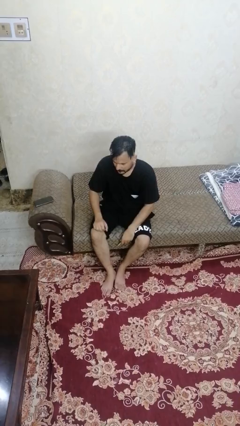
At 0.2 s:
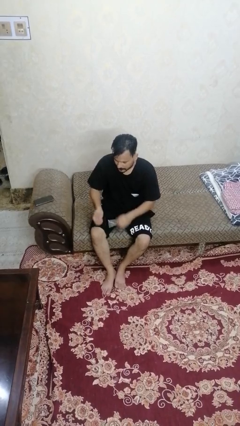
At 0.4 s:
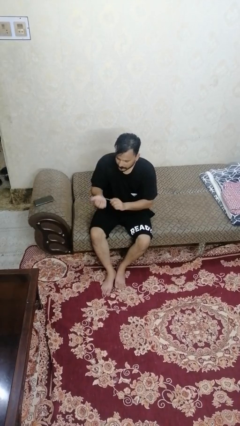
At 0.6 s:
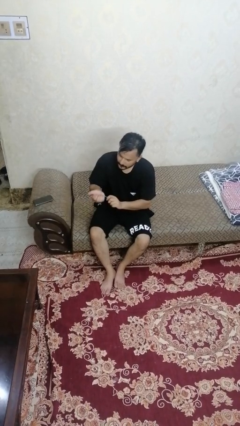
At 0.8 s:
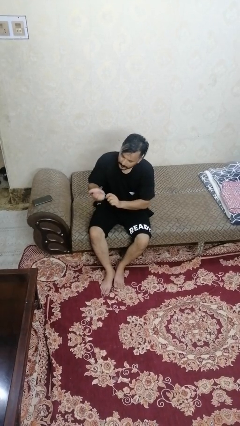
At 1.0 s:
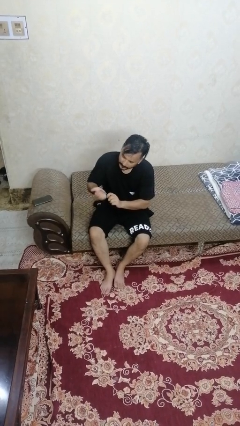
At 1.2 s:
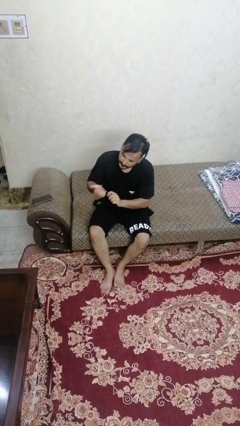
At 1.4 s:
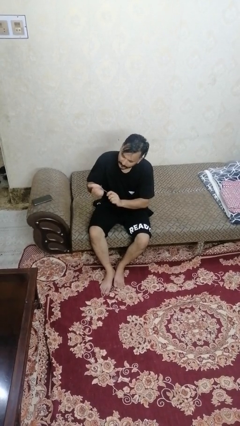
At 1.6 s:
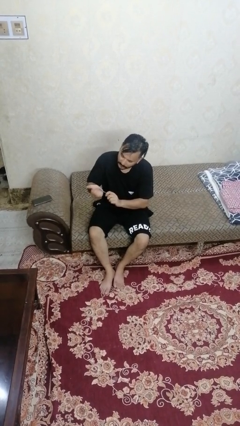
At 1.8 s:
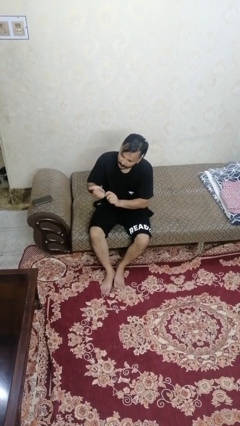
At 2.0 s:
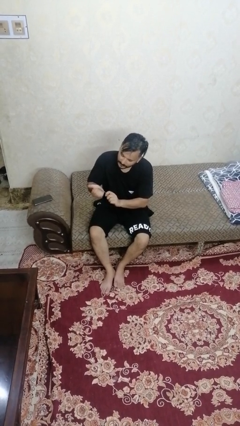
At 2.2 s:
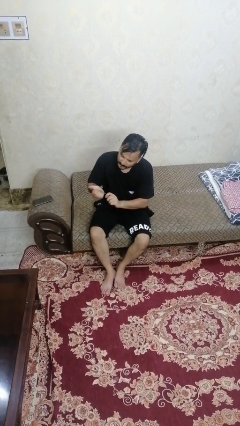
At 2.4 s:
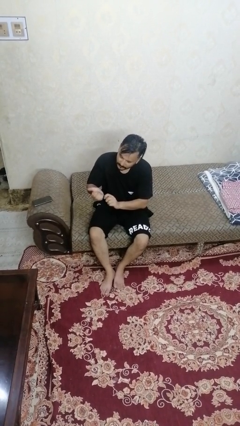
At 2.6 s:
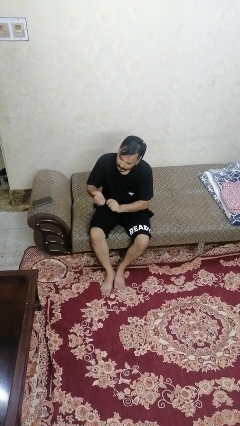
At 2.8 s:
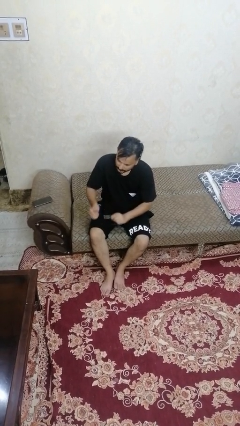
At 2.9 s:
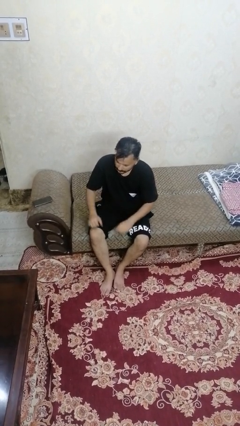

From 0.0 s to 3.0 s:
person files fingernails

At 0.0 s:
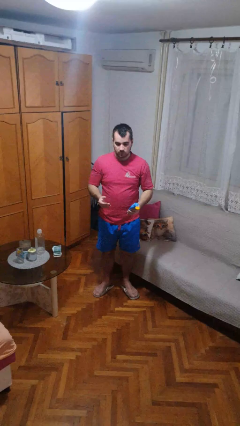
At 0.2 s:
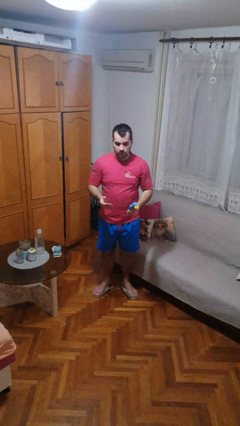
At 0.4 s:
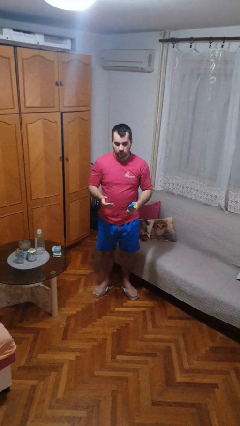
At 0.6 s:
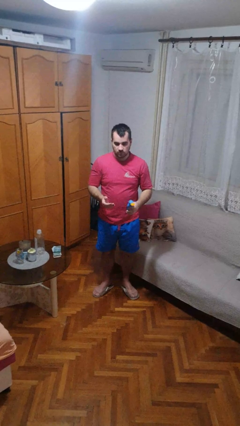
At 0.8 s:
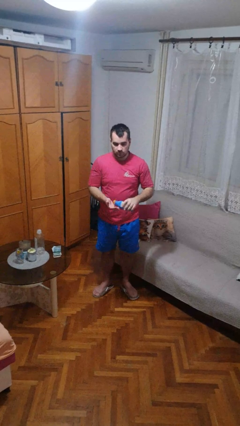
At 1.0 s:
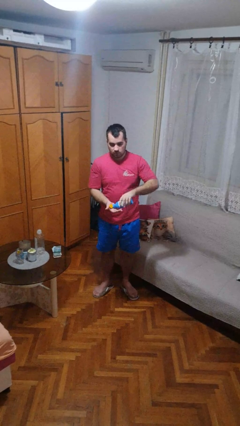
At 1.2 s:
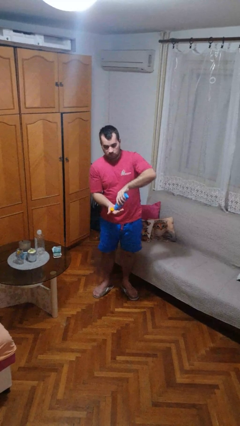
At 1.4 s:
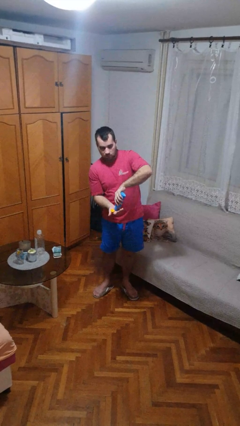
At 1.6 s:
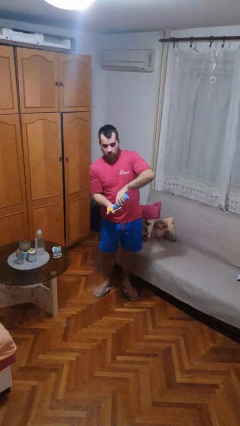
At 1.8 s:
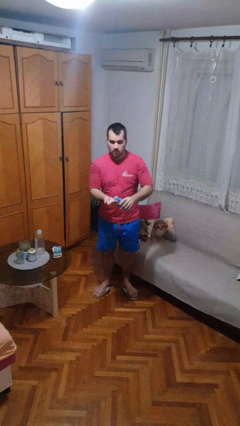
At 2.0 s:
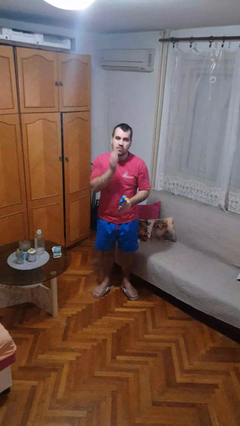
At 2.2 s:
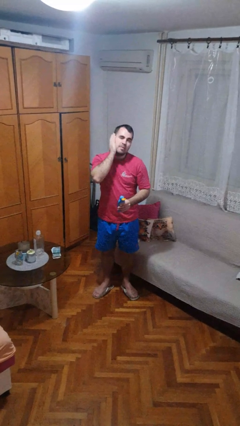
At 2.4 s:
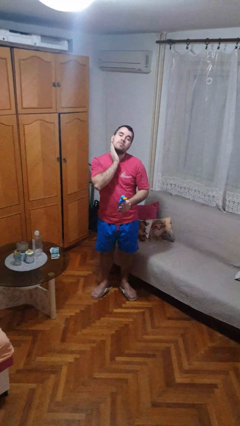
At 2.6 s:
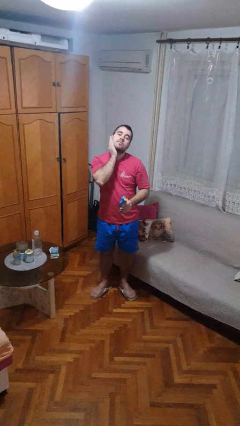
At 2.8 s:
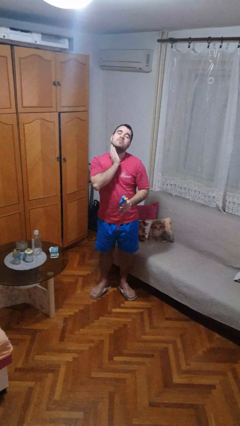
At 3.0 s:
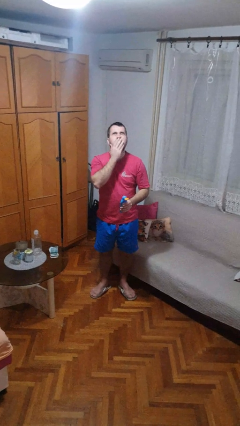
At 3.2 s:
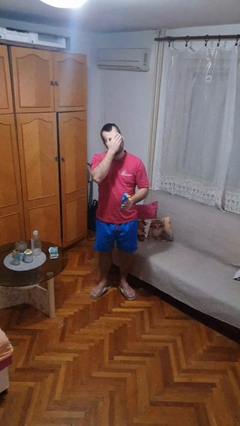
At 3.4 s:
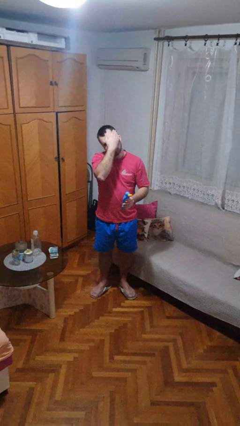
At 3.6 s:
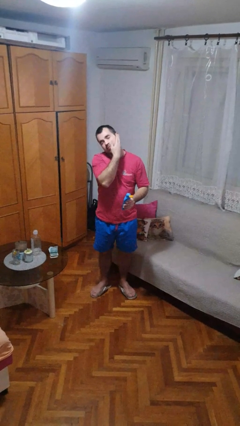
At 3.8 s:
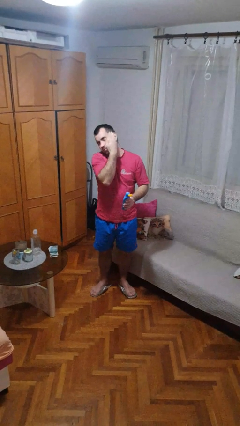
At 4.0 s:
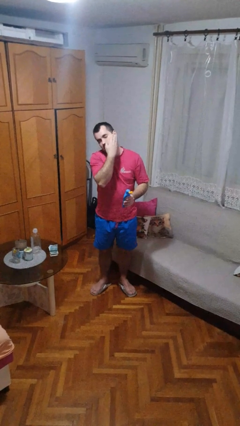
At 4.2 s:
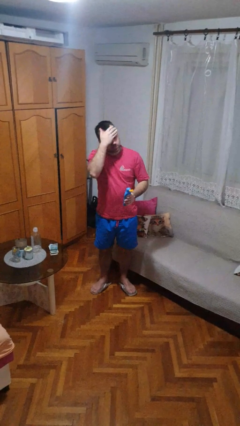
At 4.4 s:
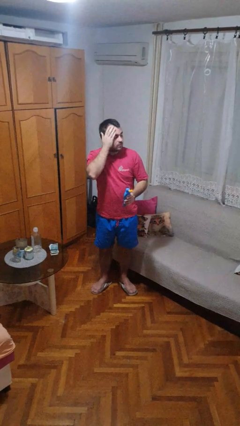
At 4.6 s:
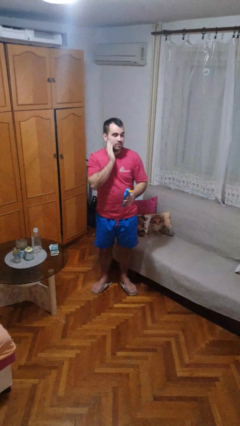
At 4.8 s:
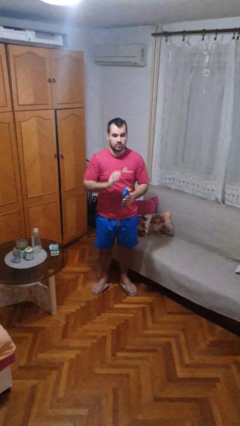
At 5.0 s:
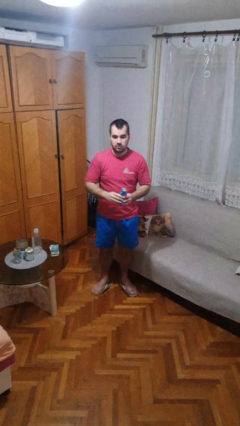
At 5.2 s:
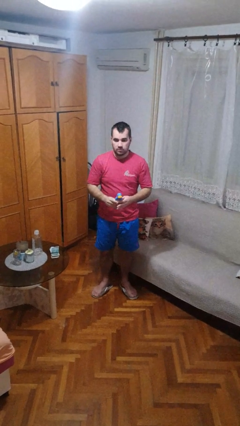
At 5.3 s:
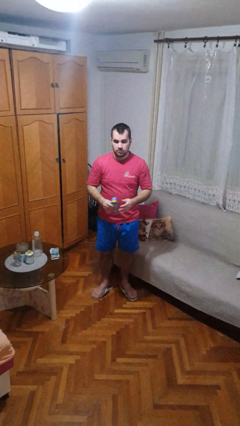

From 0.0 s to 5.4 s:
person applies sunscreen

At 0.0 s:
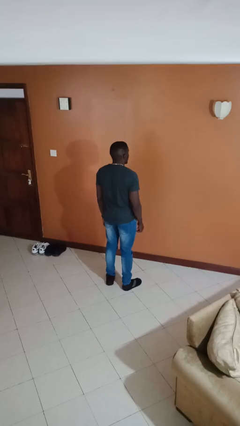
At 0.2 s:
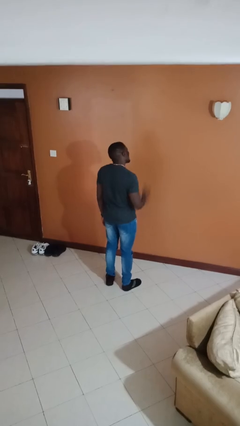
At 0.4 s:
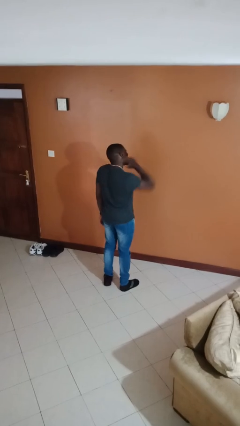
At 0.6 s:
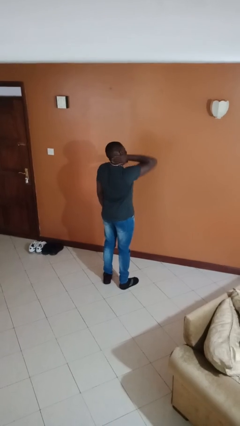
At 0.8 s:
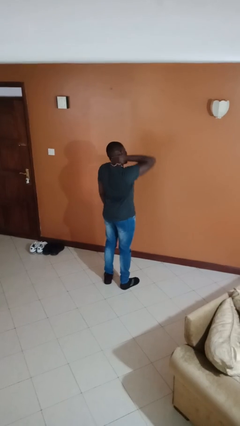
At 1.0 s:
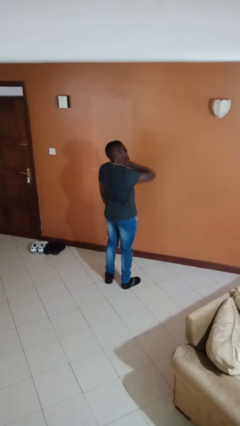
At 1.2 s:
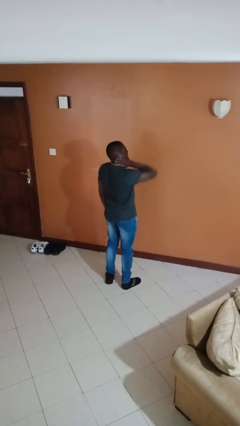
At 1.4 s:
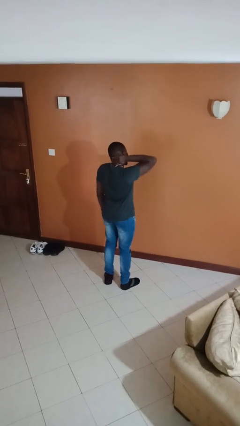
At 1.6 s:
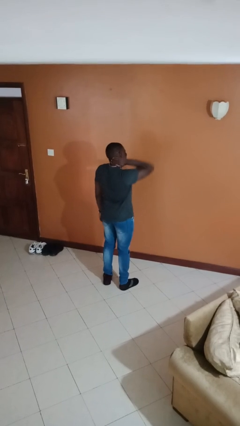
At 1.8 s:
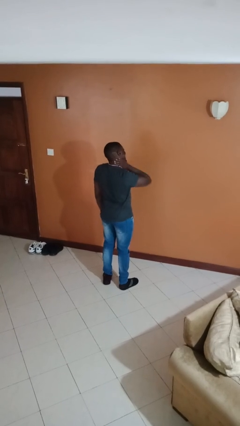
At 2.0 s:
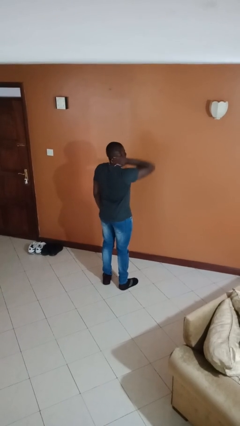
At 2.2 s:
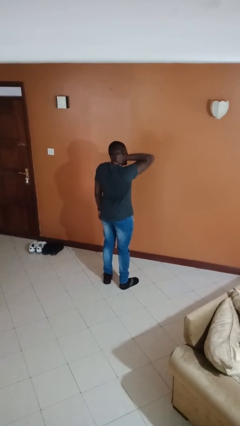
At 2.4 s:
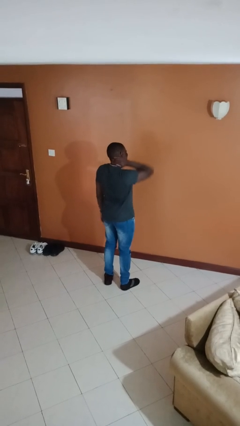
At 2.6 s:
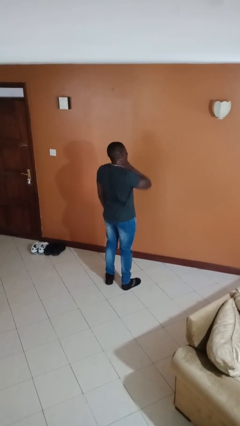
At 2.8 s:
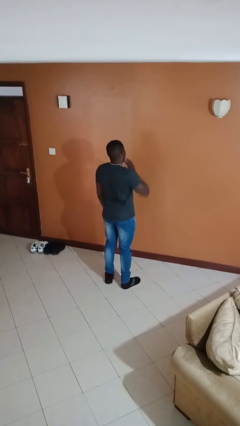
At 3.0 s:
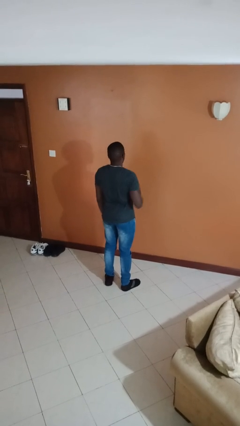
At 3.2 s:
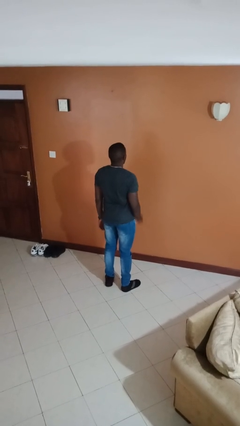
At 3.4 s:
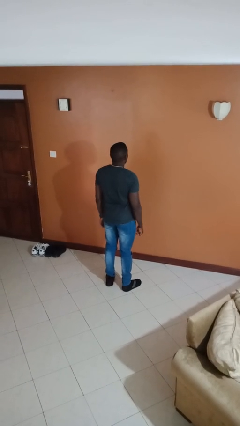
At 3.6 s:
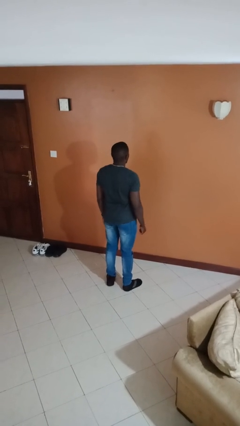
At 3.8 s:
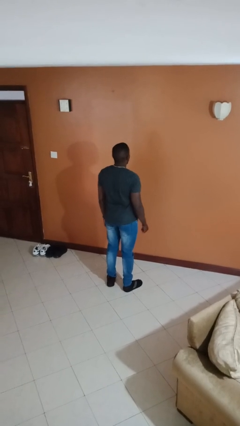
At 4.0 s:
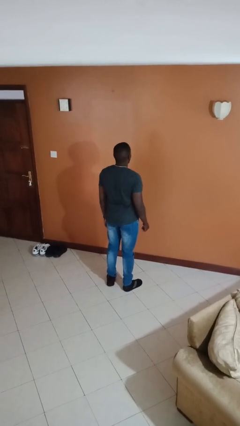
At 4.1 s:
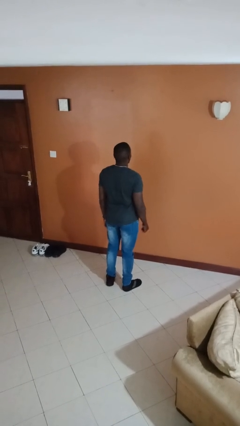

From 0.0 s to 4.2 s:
person rubs neck

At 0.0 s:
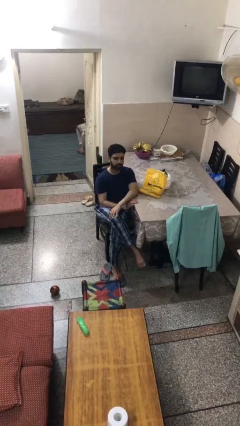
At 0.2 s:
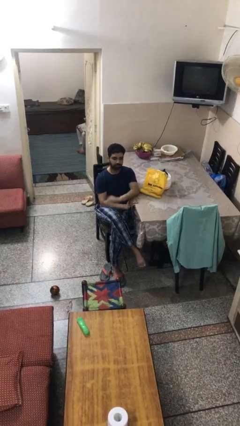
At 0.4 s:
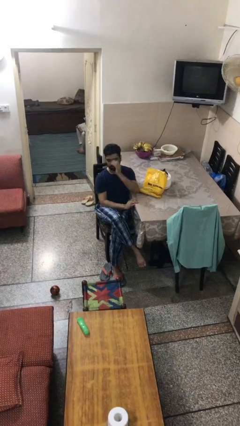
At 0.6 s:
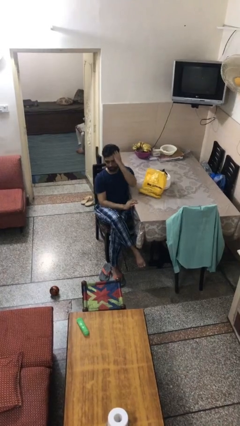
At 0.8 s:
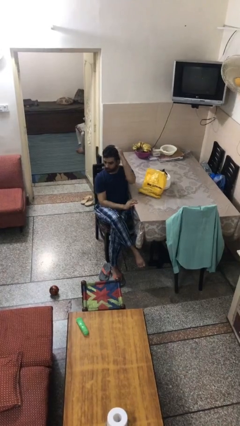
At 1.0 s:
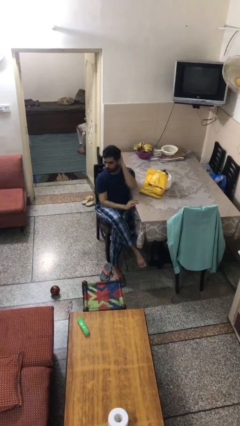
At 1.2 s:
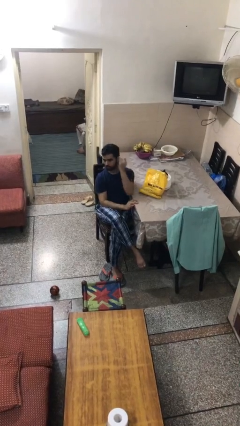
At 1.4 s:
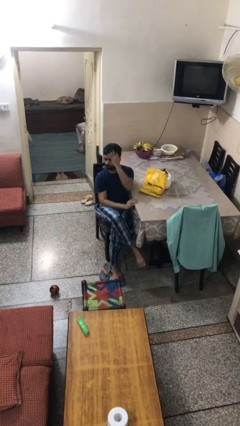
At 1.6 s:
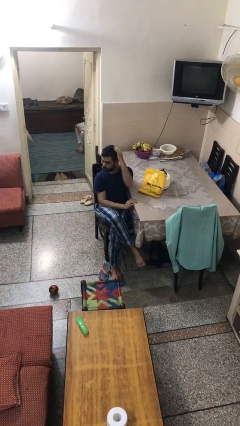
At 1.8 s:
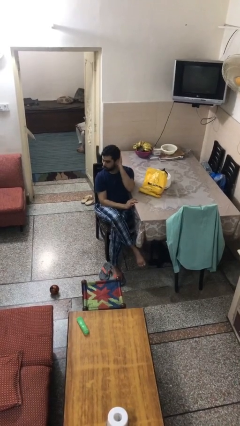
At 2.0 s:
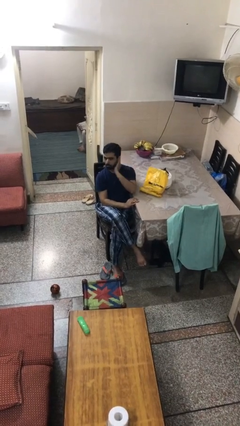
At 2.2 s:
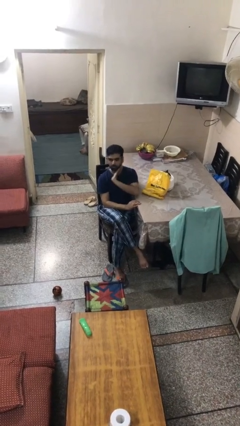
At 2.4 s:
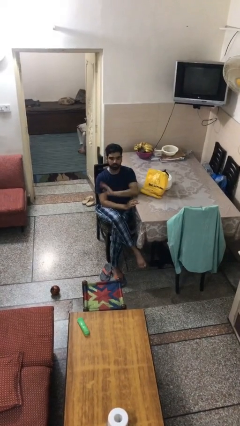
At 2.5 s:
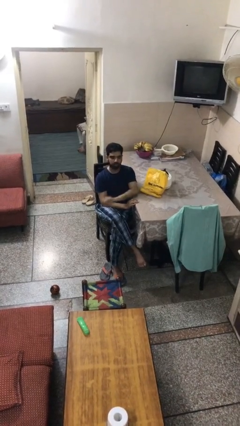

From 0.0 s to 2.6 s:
person strokes hair

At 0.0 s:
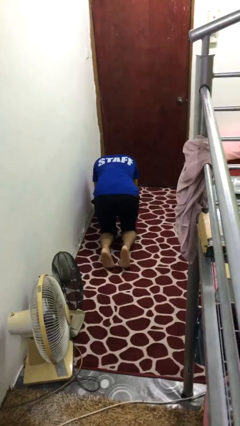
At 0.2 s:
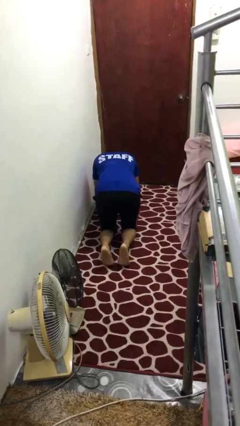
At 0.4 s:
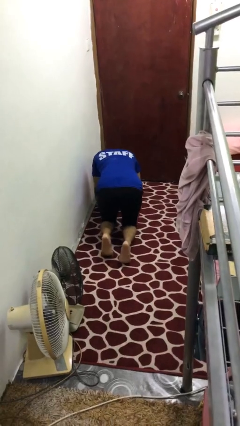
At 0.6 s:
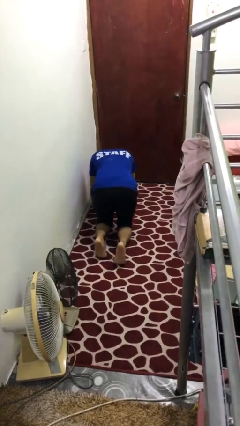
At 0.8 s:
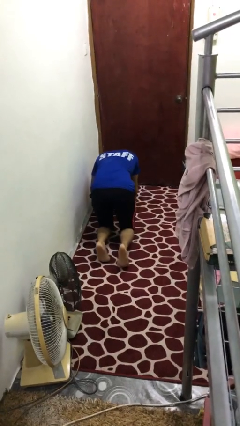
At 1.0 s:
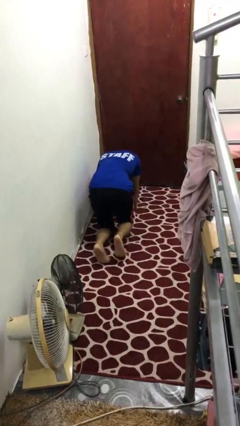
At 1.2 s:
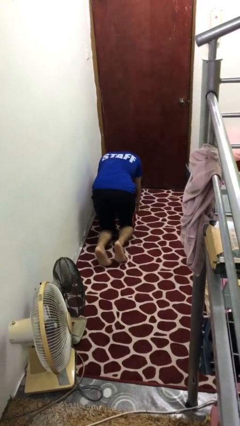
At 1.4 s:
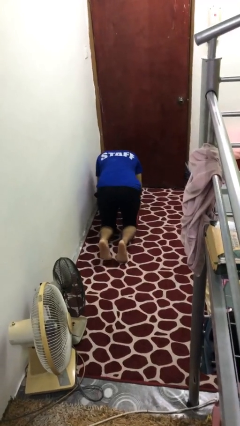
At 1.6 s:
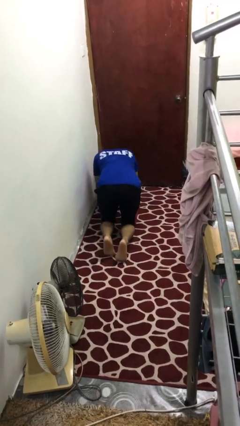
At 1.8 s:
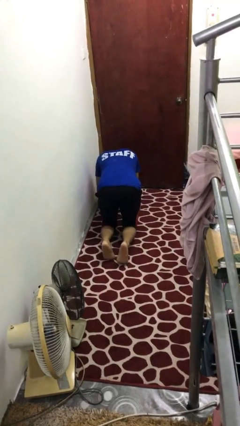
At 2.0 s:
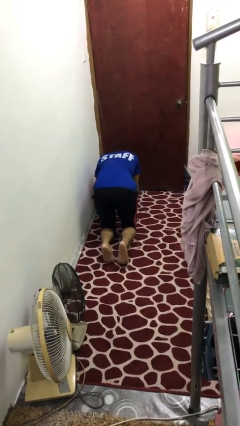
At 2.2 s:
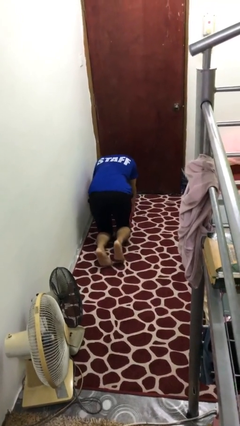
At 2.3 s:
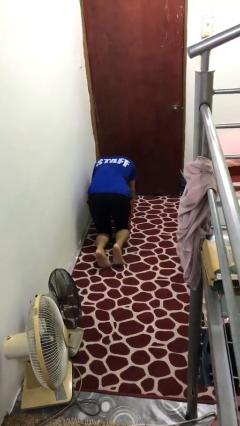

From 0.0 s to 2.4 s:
person crawls
